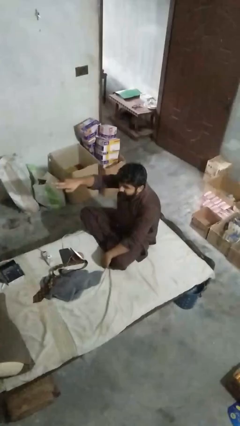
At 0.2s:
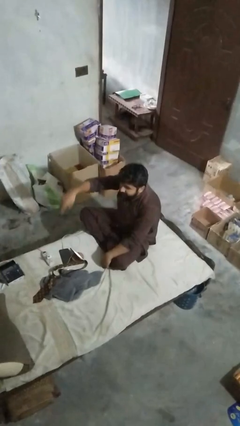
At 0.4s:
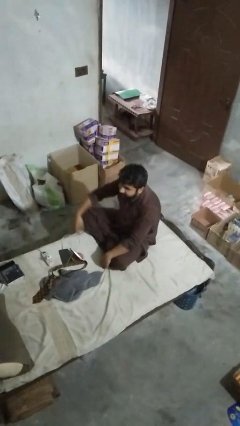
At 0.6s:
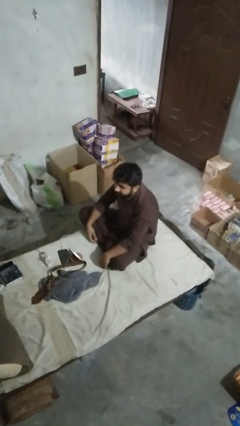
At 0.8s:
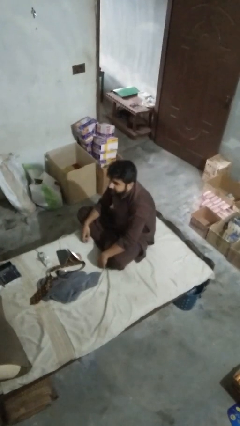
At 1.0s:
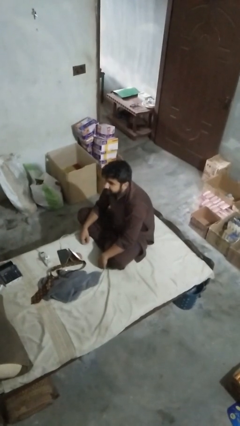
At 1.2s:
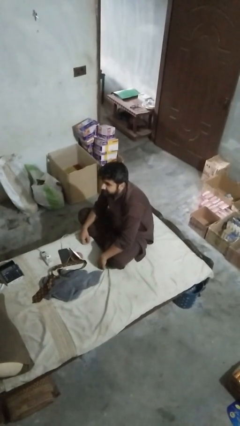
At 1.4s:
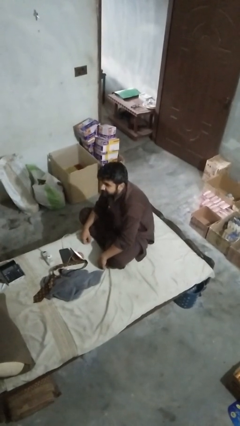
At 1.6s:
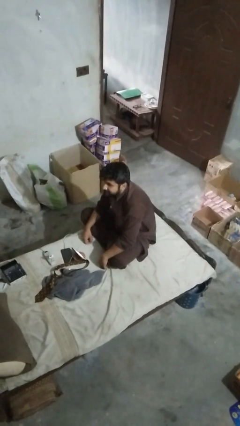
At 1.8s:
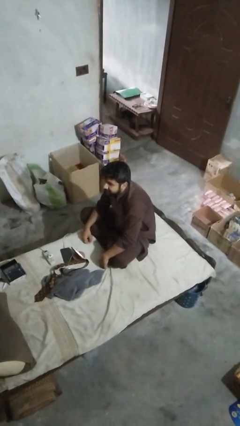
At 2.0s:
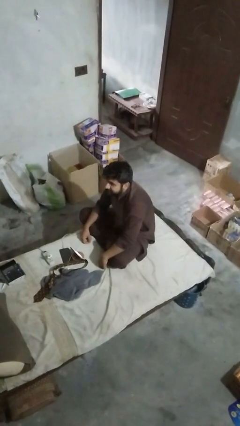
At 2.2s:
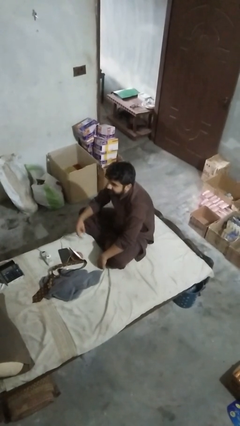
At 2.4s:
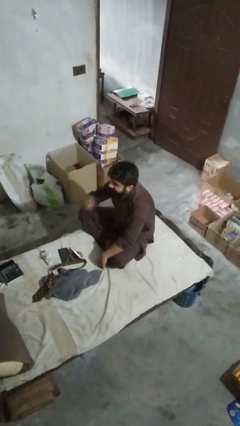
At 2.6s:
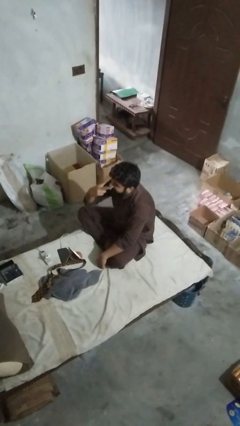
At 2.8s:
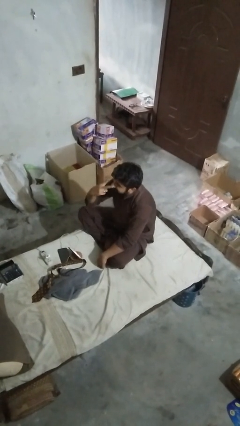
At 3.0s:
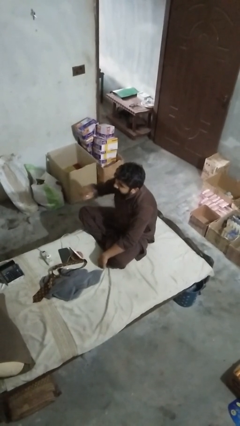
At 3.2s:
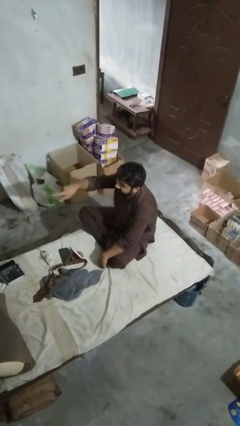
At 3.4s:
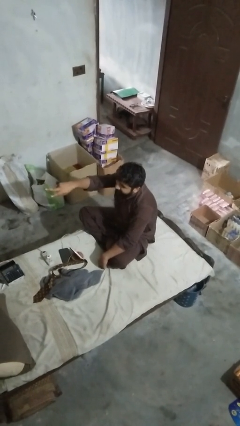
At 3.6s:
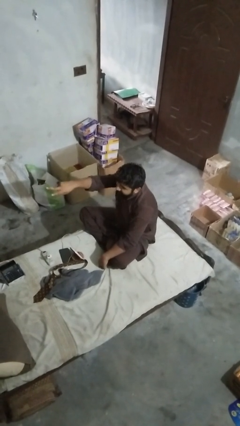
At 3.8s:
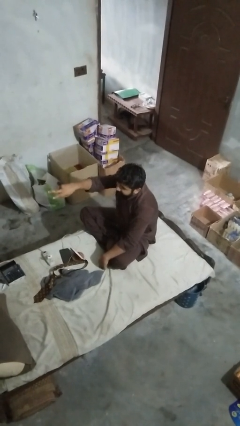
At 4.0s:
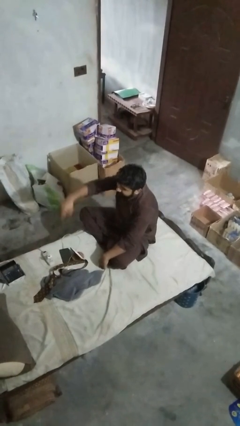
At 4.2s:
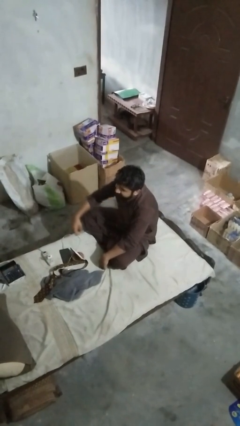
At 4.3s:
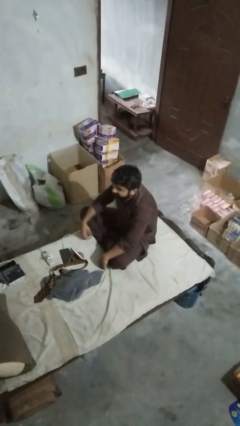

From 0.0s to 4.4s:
person gestures watch closely

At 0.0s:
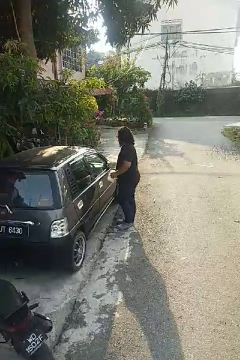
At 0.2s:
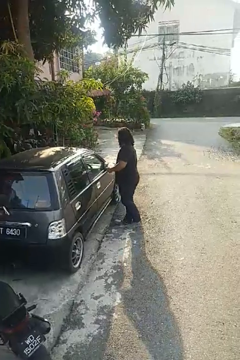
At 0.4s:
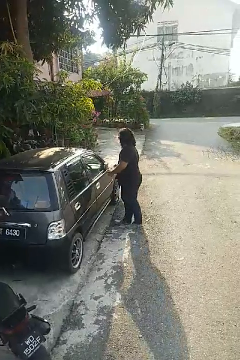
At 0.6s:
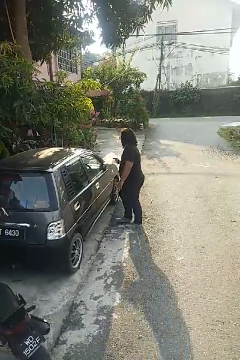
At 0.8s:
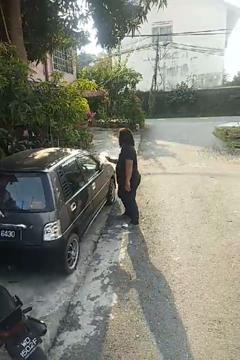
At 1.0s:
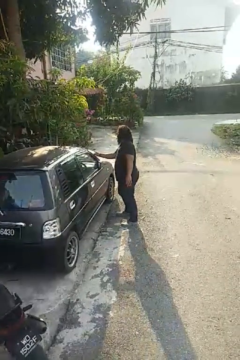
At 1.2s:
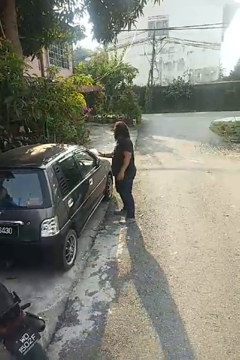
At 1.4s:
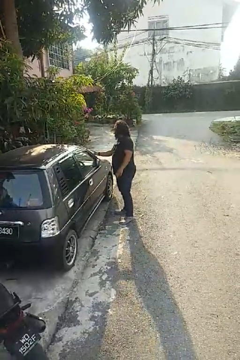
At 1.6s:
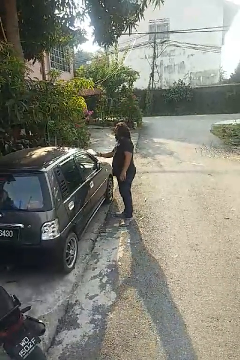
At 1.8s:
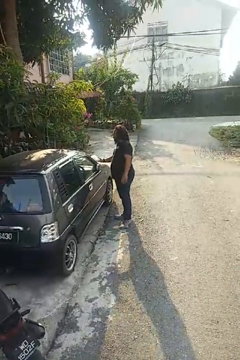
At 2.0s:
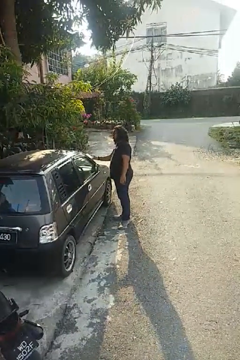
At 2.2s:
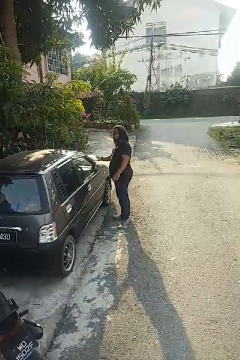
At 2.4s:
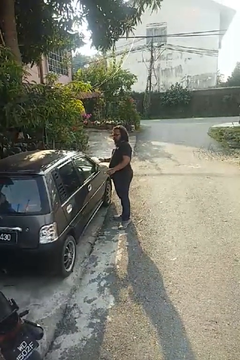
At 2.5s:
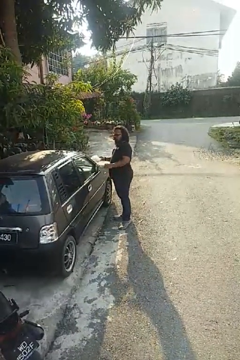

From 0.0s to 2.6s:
person polishes car with rag

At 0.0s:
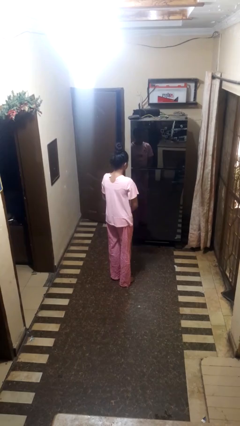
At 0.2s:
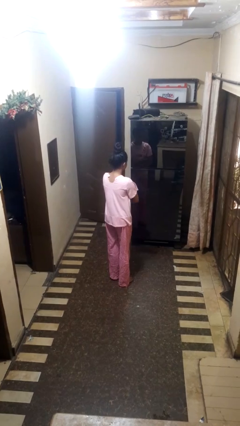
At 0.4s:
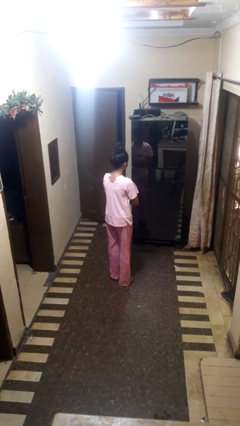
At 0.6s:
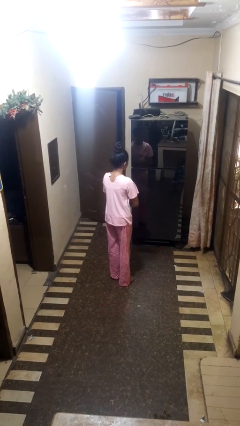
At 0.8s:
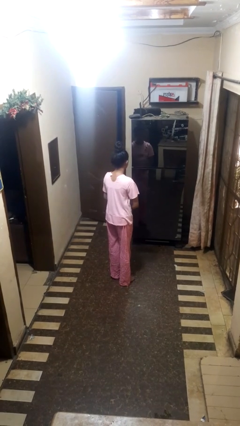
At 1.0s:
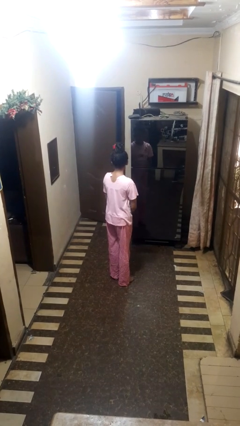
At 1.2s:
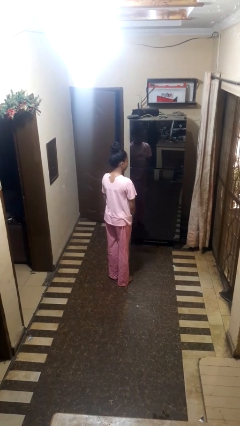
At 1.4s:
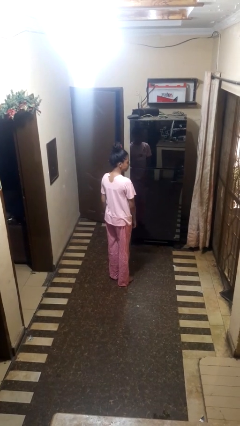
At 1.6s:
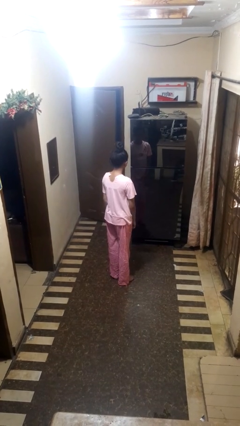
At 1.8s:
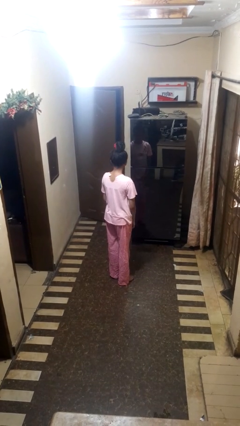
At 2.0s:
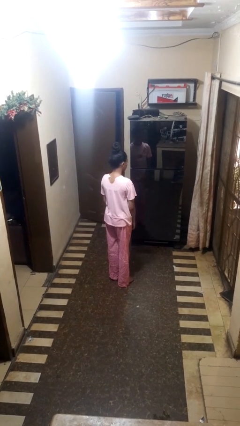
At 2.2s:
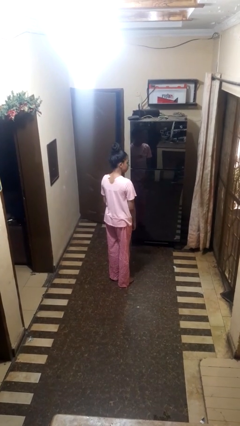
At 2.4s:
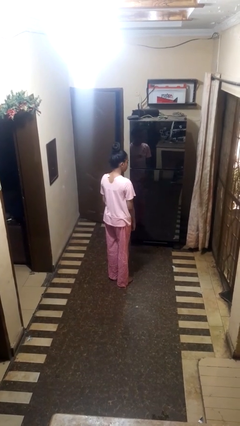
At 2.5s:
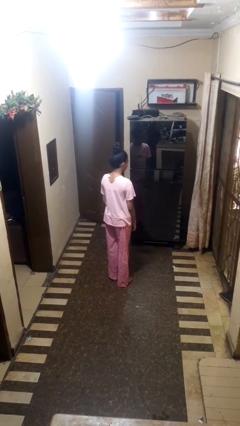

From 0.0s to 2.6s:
person nods head

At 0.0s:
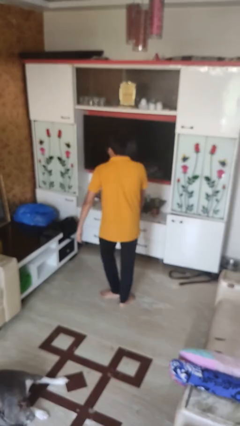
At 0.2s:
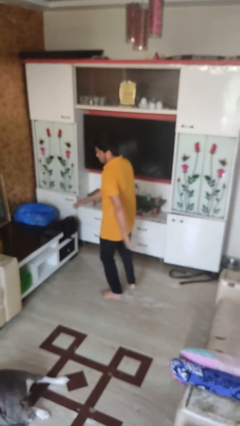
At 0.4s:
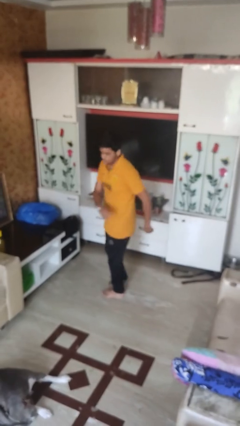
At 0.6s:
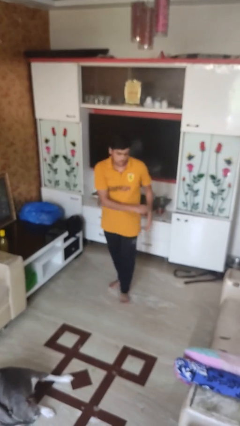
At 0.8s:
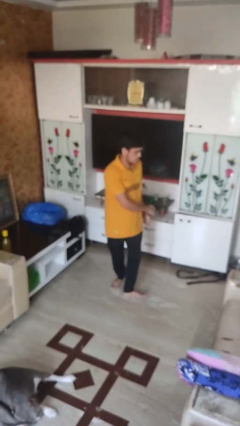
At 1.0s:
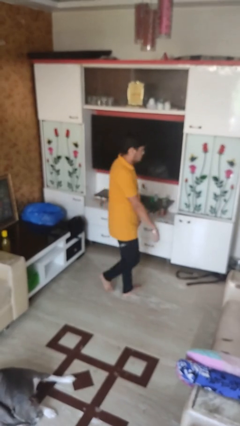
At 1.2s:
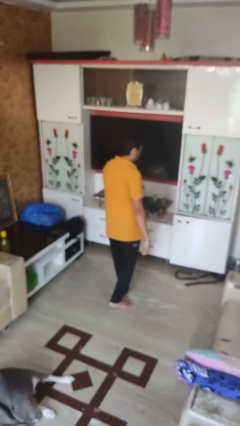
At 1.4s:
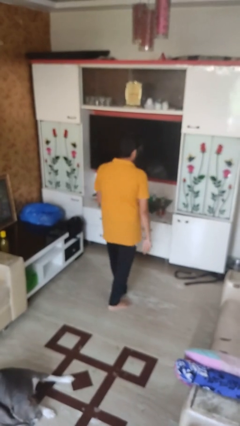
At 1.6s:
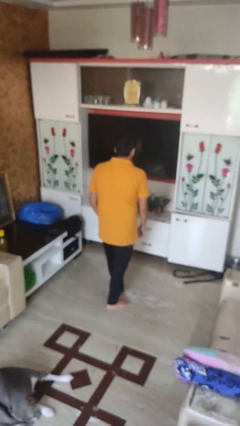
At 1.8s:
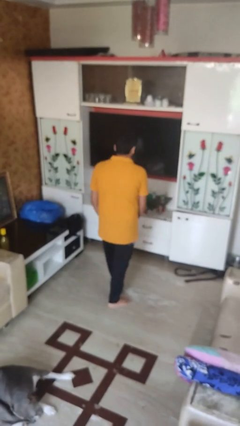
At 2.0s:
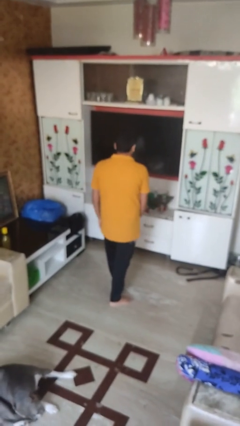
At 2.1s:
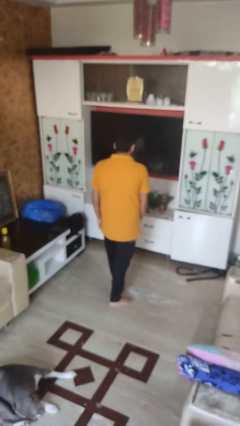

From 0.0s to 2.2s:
person twirls

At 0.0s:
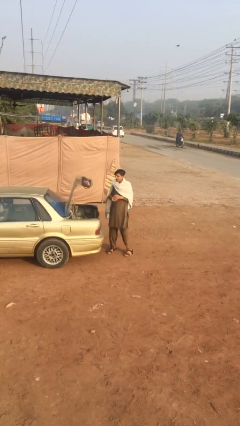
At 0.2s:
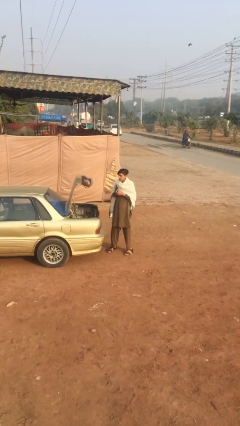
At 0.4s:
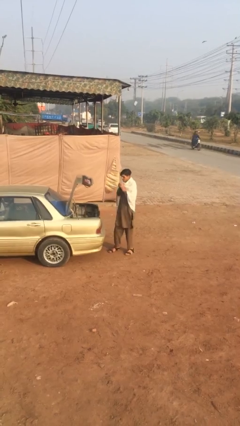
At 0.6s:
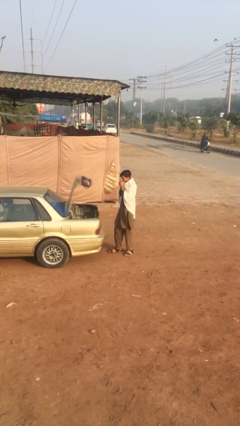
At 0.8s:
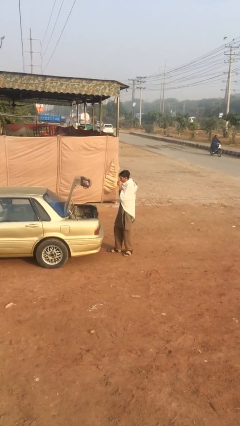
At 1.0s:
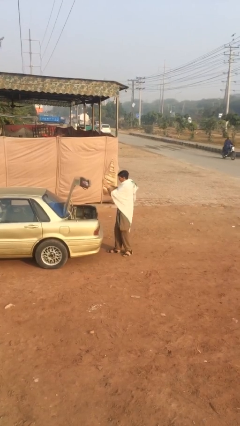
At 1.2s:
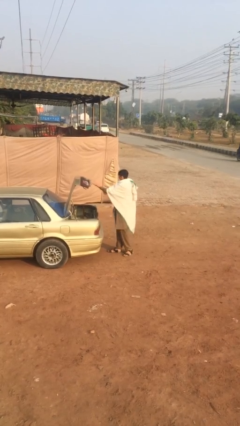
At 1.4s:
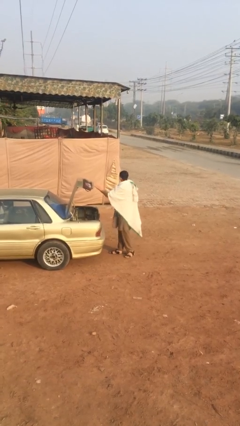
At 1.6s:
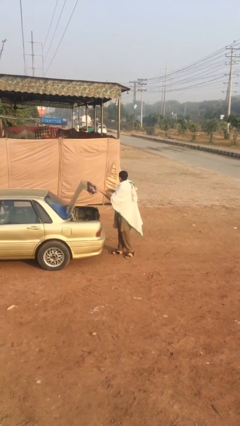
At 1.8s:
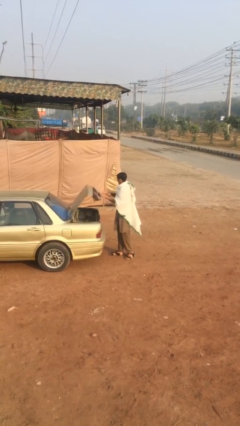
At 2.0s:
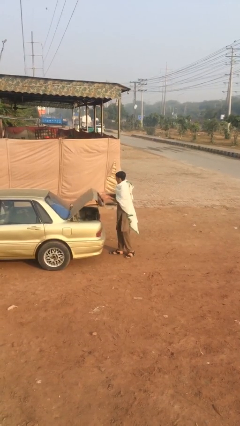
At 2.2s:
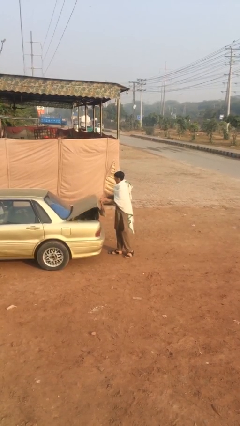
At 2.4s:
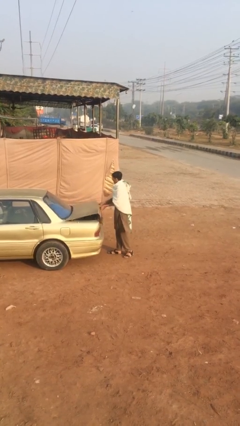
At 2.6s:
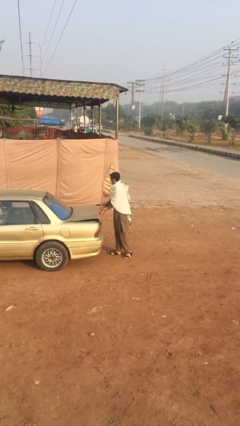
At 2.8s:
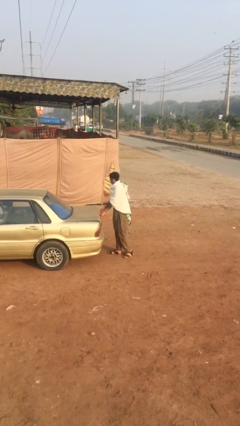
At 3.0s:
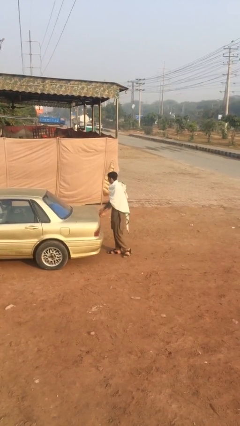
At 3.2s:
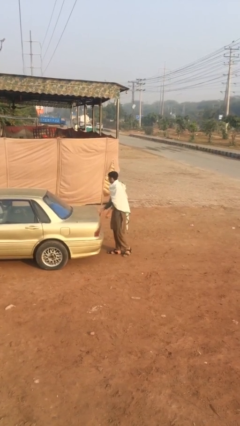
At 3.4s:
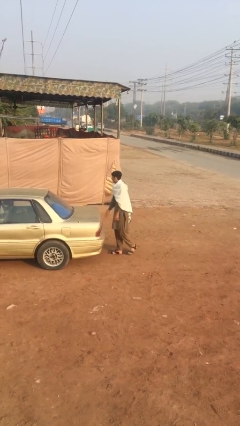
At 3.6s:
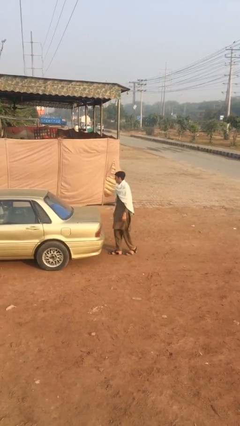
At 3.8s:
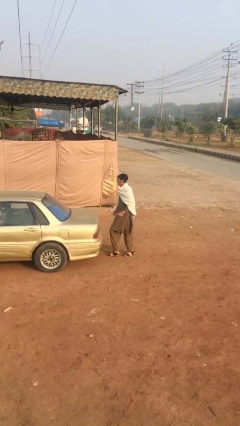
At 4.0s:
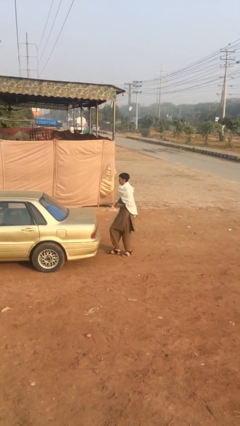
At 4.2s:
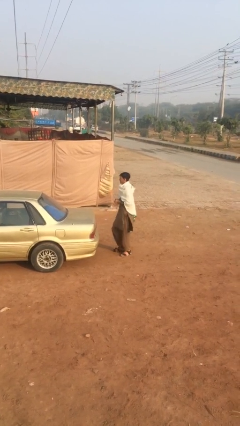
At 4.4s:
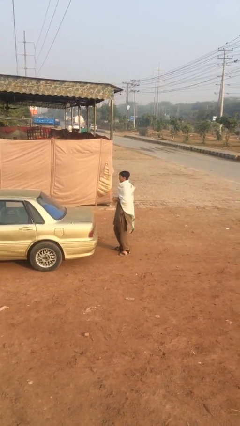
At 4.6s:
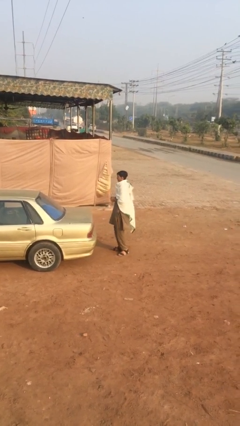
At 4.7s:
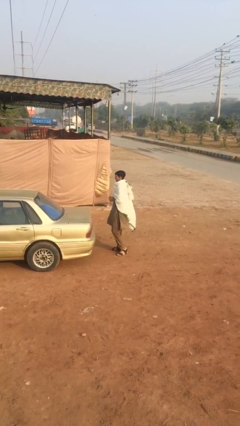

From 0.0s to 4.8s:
person closes car trunk

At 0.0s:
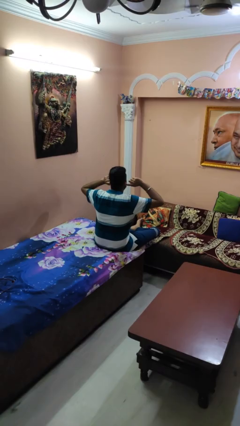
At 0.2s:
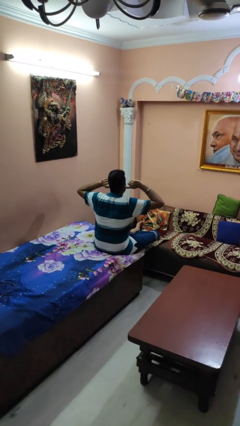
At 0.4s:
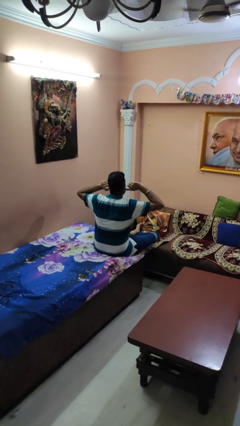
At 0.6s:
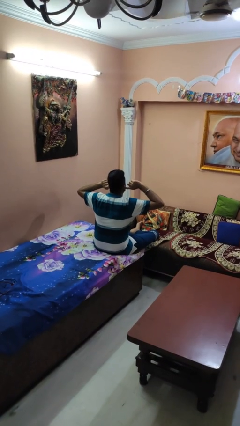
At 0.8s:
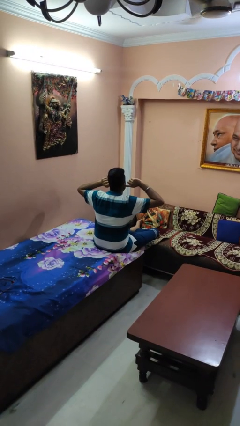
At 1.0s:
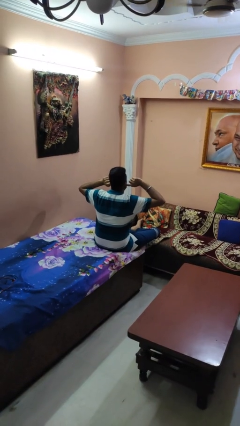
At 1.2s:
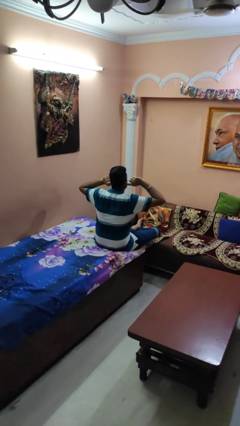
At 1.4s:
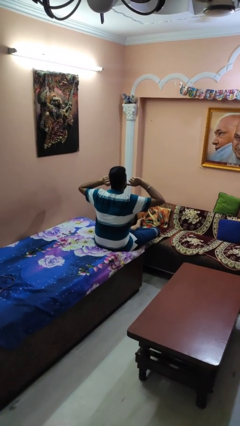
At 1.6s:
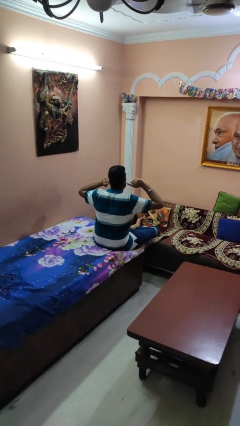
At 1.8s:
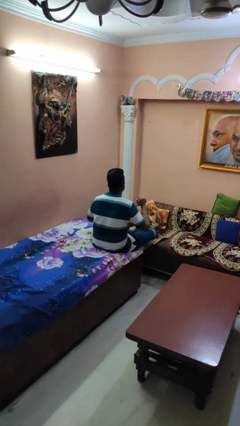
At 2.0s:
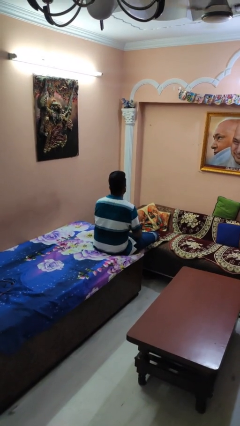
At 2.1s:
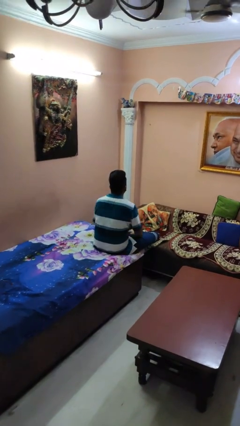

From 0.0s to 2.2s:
person puts fingers in ear
